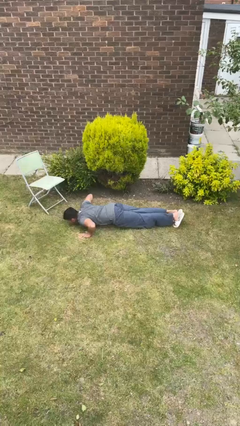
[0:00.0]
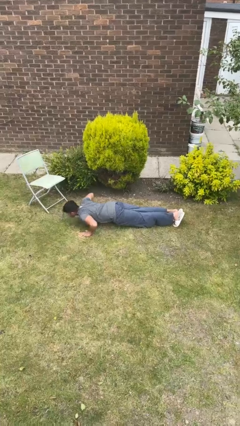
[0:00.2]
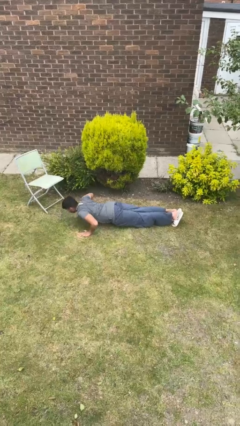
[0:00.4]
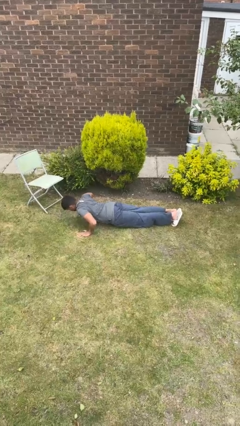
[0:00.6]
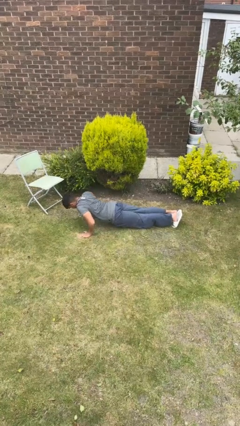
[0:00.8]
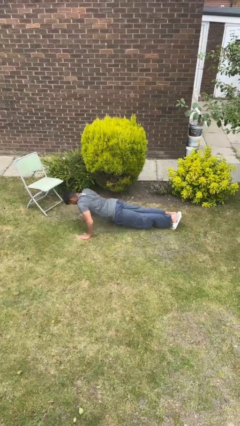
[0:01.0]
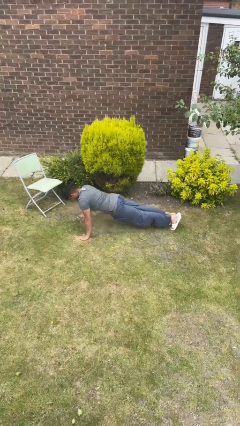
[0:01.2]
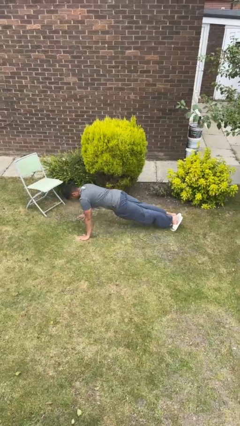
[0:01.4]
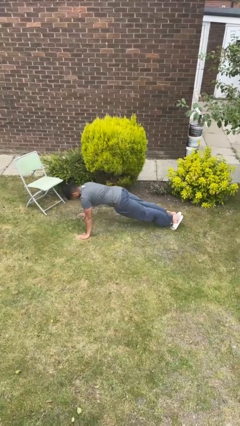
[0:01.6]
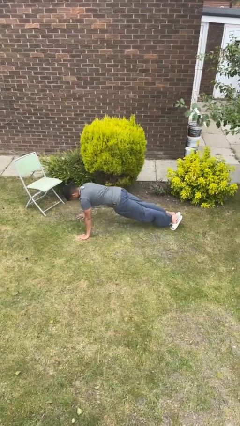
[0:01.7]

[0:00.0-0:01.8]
person exercises with pushup

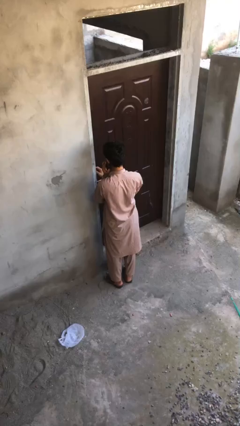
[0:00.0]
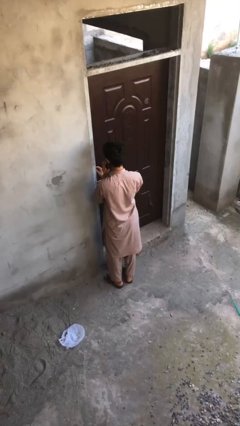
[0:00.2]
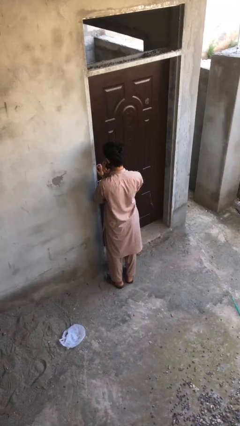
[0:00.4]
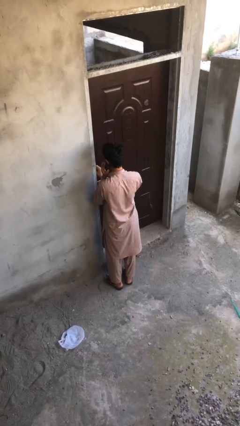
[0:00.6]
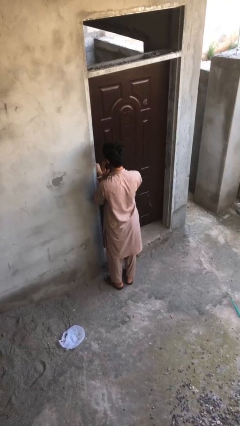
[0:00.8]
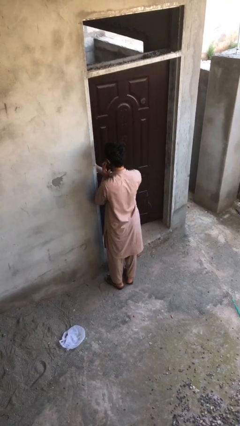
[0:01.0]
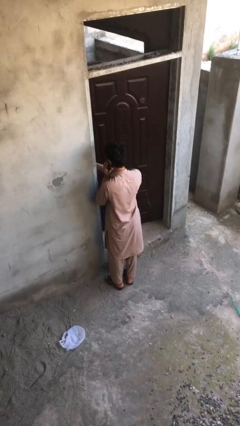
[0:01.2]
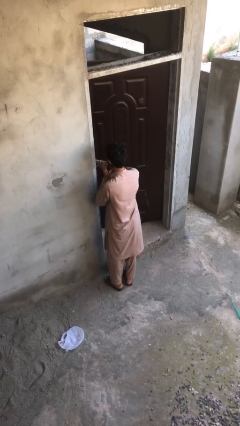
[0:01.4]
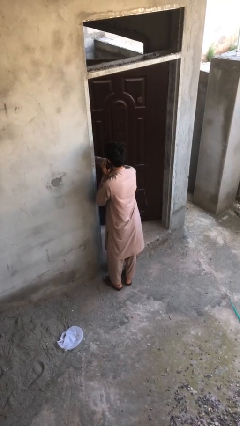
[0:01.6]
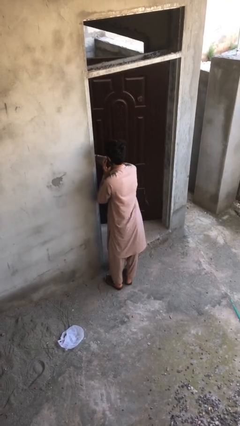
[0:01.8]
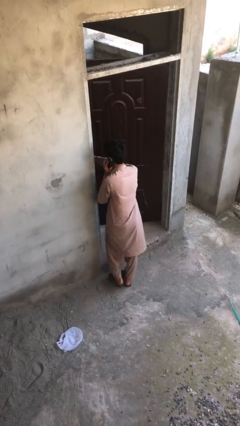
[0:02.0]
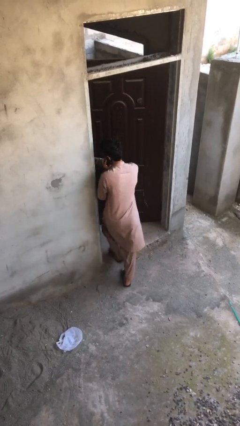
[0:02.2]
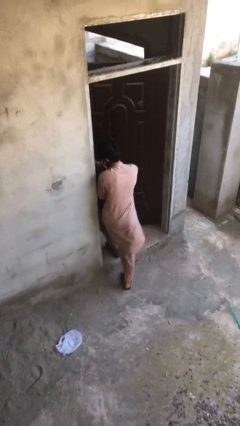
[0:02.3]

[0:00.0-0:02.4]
person opens facility door

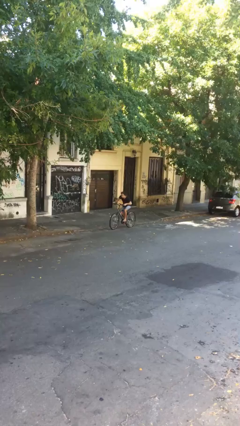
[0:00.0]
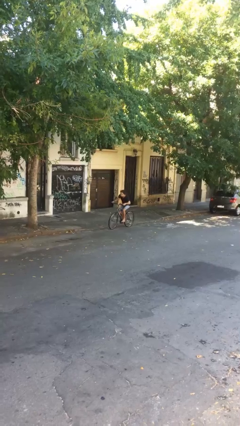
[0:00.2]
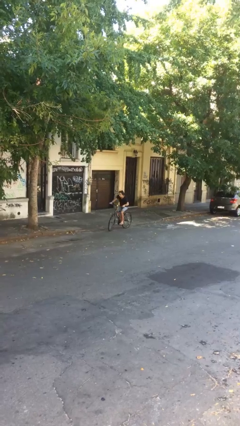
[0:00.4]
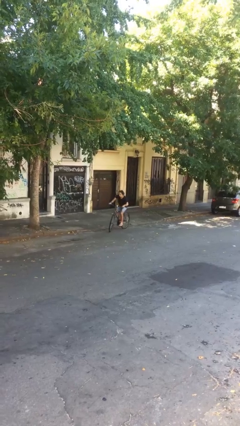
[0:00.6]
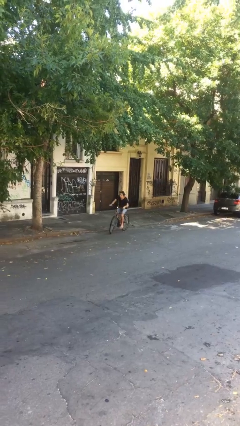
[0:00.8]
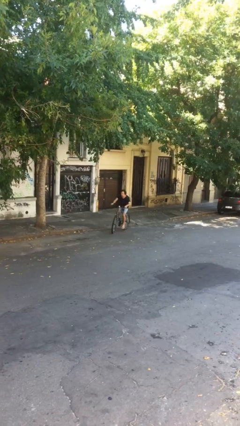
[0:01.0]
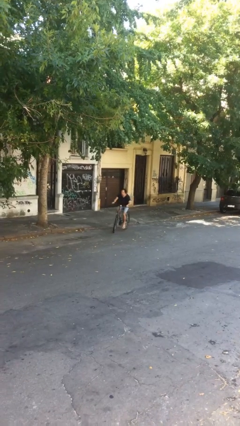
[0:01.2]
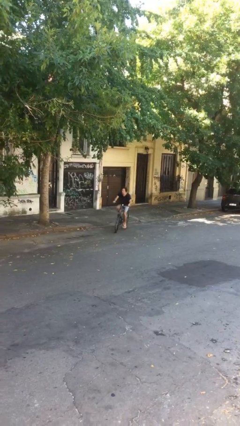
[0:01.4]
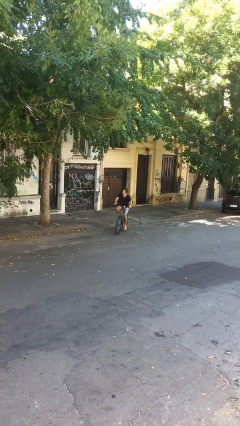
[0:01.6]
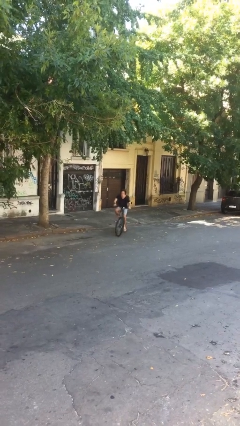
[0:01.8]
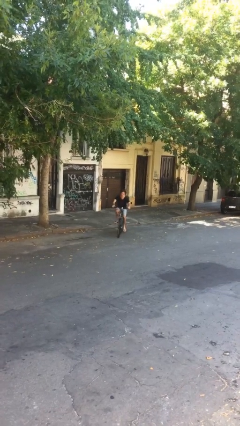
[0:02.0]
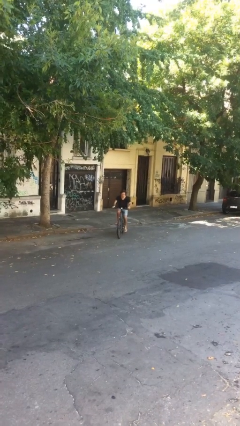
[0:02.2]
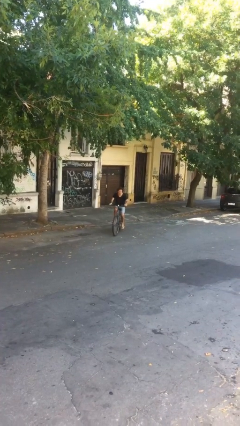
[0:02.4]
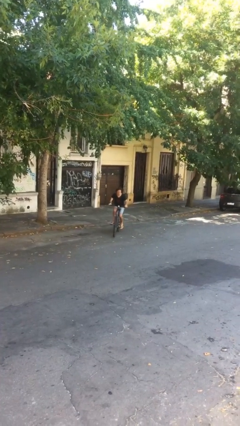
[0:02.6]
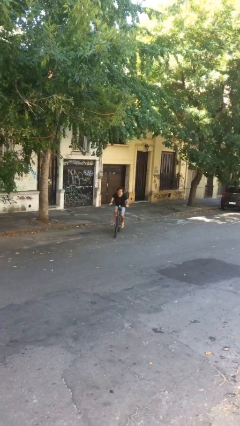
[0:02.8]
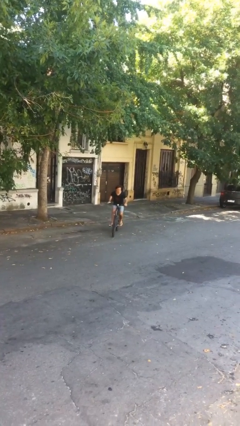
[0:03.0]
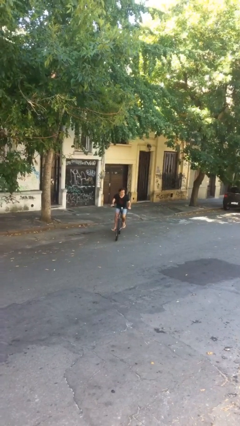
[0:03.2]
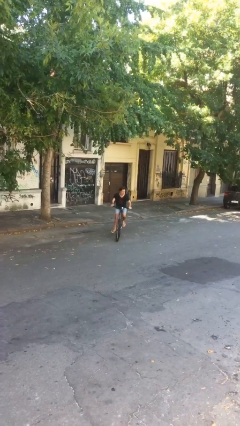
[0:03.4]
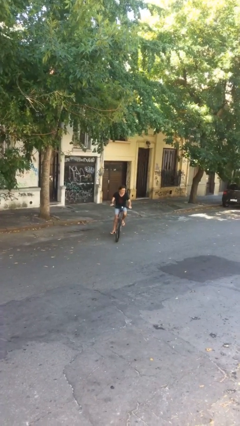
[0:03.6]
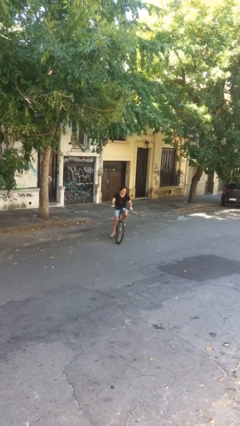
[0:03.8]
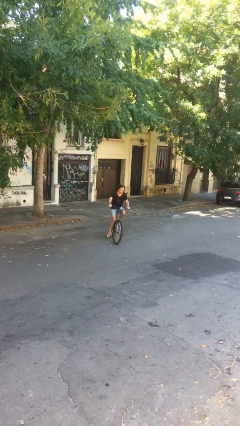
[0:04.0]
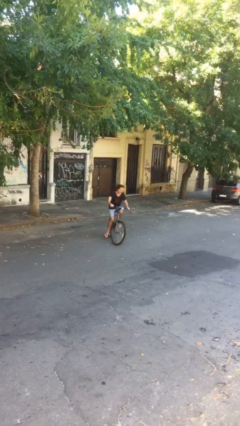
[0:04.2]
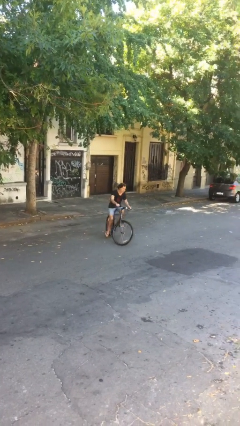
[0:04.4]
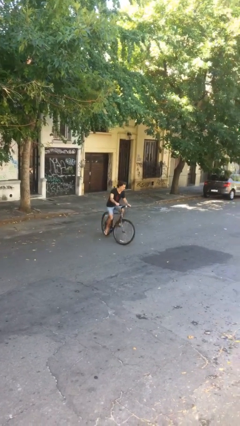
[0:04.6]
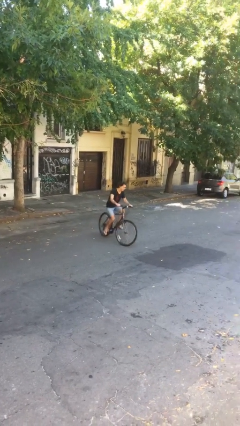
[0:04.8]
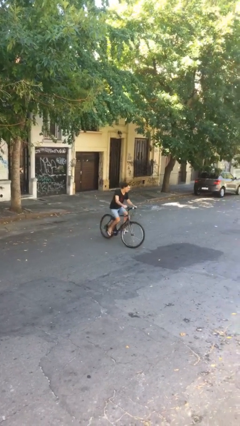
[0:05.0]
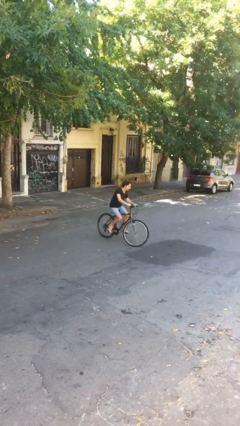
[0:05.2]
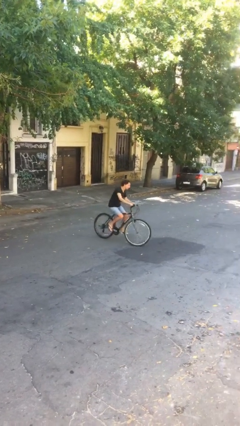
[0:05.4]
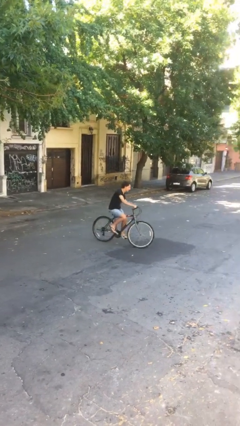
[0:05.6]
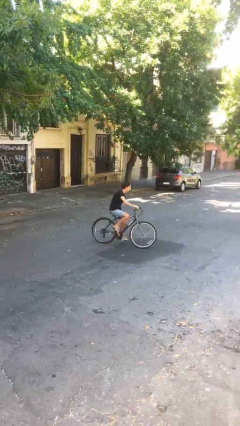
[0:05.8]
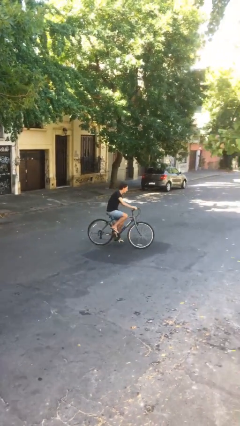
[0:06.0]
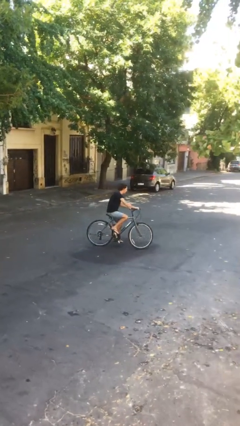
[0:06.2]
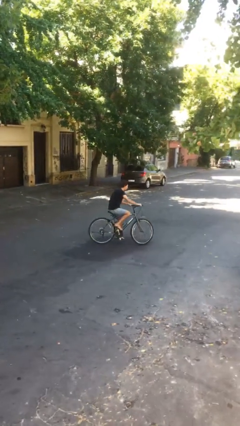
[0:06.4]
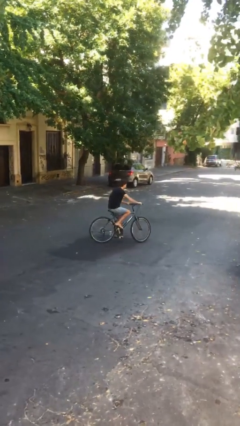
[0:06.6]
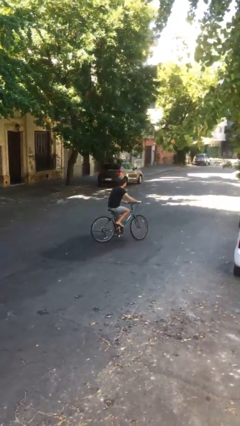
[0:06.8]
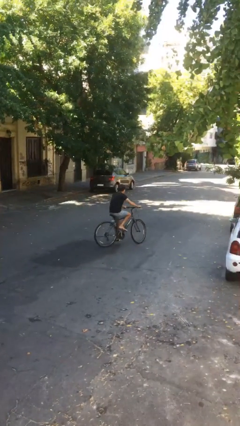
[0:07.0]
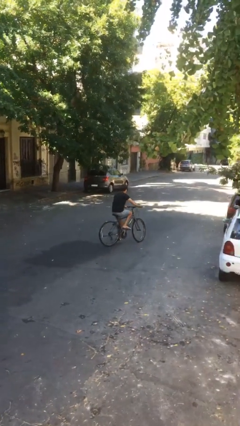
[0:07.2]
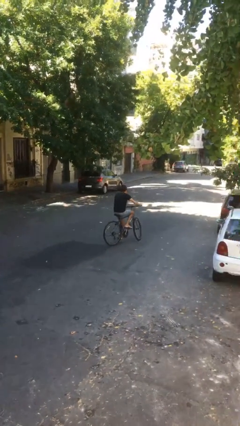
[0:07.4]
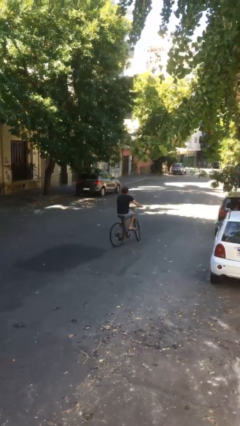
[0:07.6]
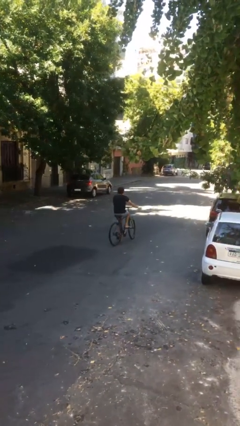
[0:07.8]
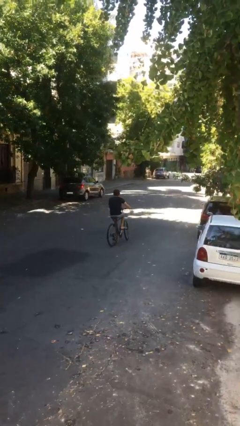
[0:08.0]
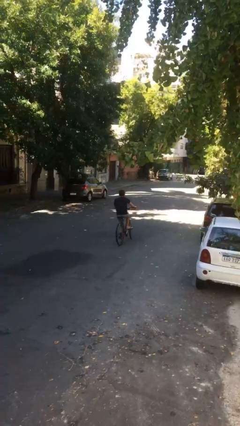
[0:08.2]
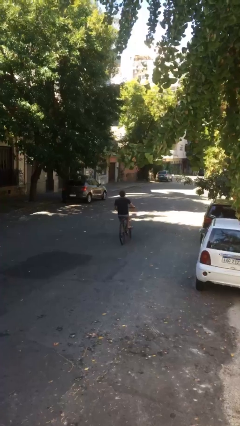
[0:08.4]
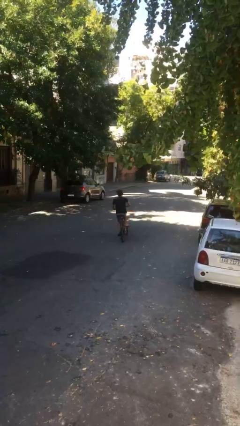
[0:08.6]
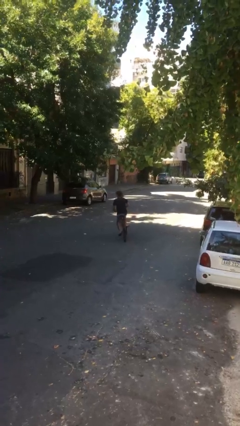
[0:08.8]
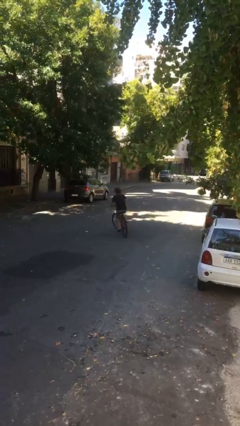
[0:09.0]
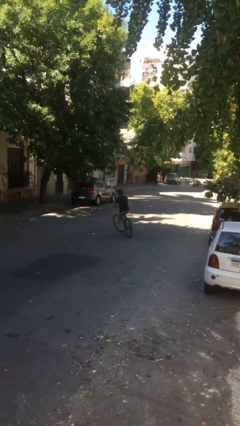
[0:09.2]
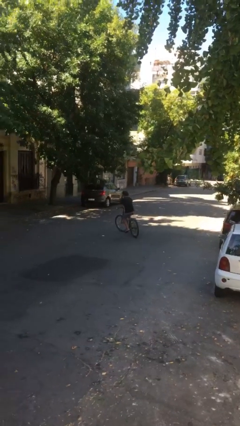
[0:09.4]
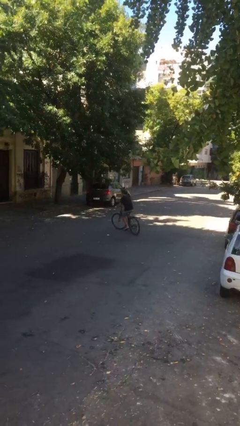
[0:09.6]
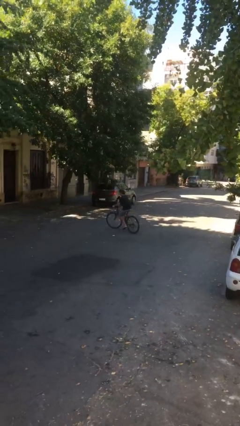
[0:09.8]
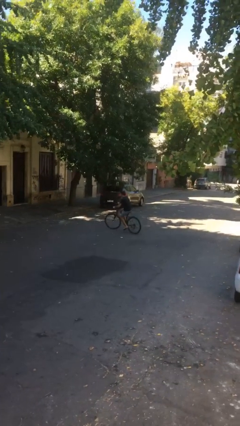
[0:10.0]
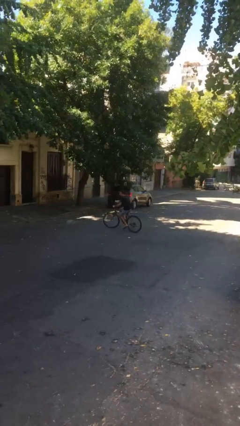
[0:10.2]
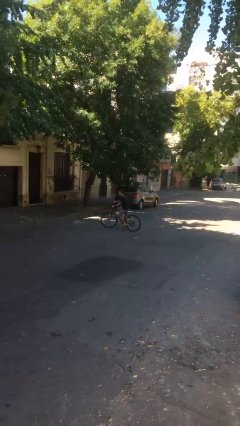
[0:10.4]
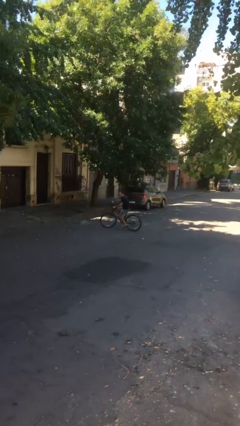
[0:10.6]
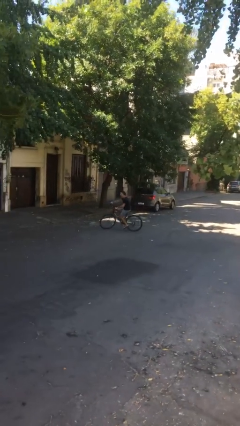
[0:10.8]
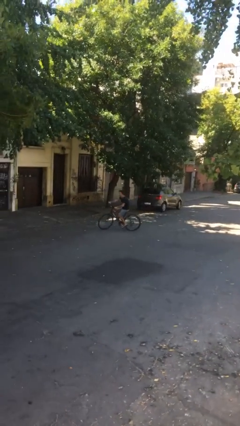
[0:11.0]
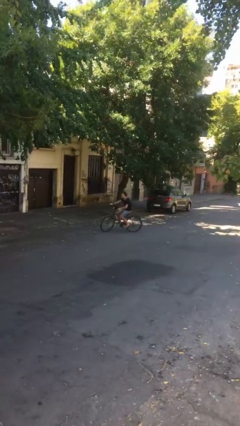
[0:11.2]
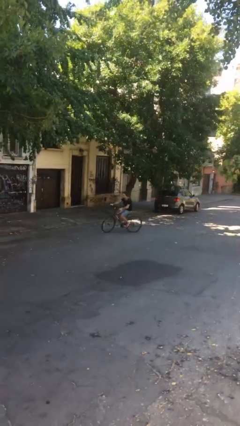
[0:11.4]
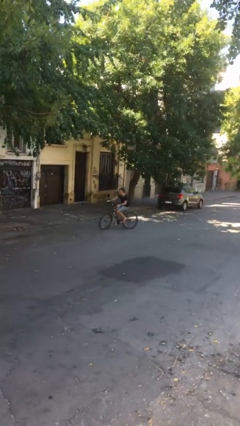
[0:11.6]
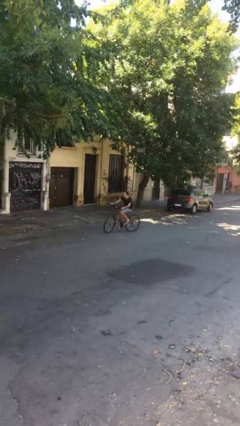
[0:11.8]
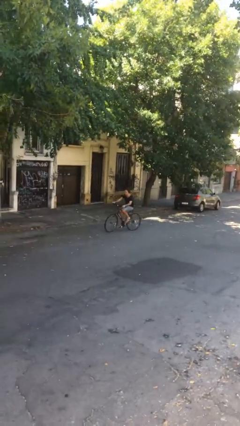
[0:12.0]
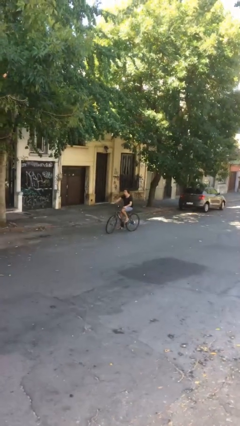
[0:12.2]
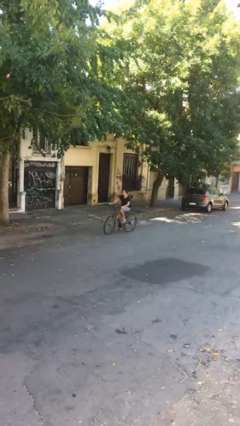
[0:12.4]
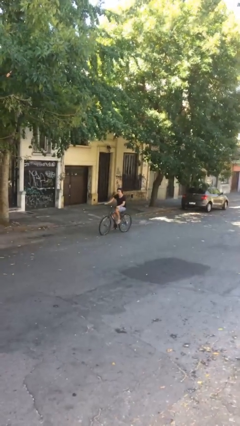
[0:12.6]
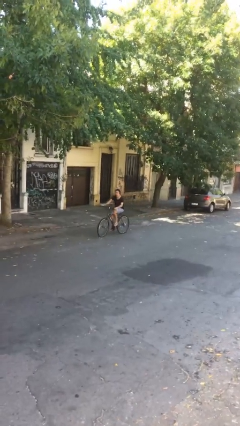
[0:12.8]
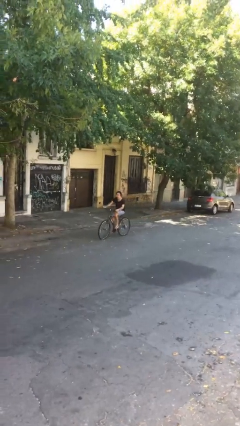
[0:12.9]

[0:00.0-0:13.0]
person rides bicycle

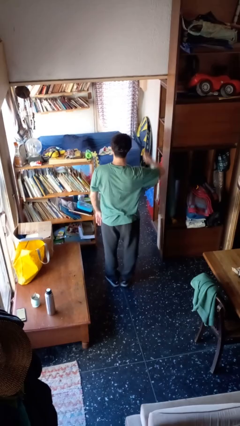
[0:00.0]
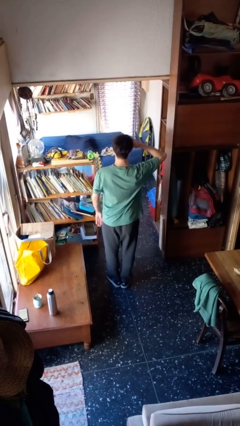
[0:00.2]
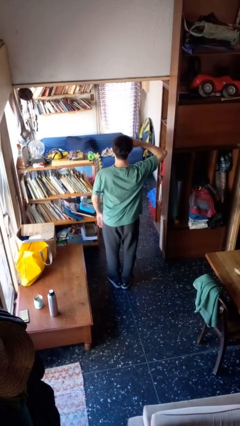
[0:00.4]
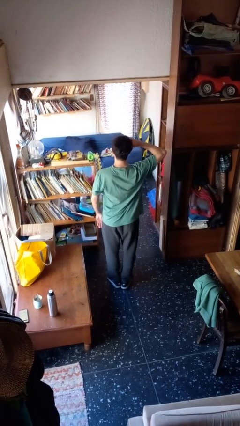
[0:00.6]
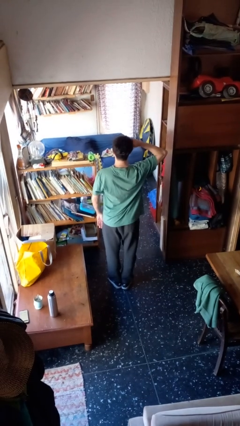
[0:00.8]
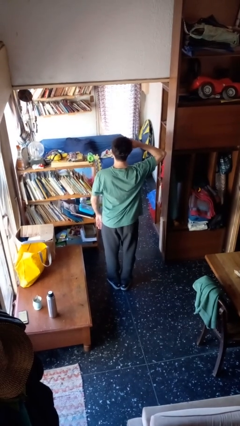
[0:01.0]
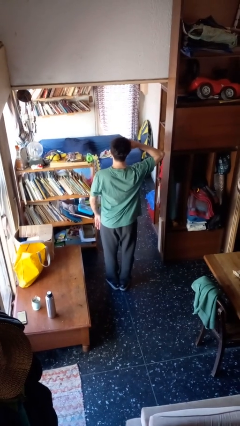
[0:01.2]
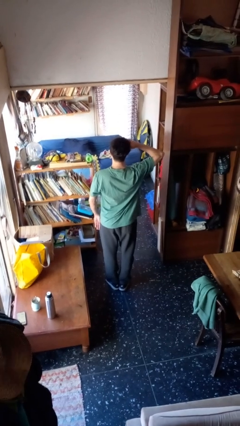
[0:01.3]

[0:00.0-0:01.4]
person salutes
